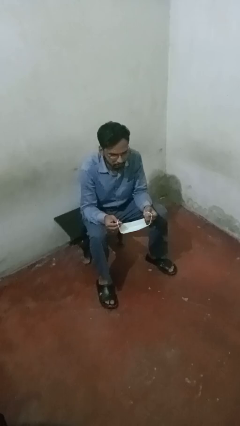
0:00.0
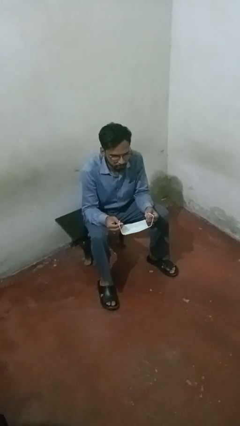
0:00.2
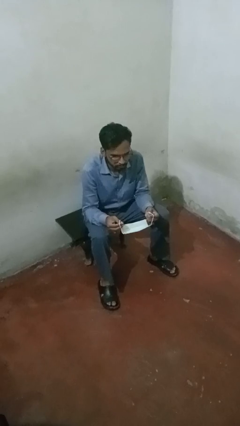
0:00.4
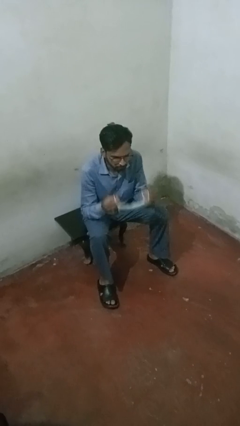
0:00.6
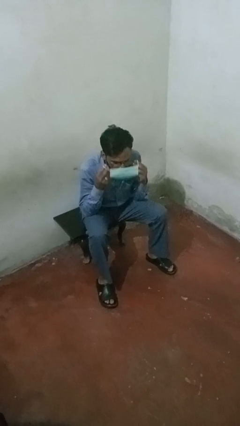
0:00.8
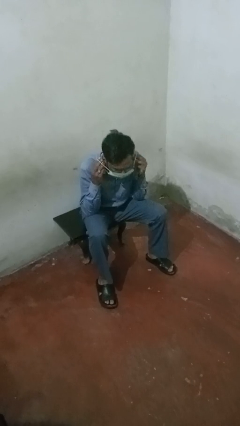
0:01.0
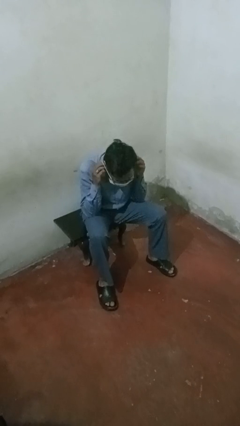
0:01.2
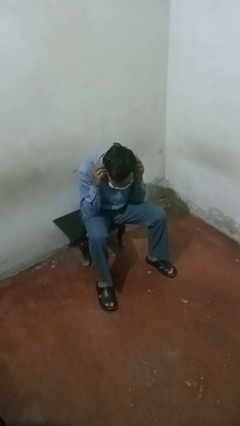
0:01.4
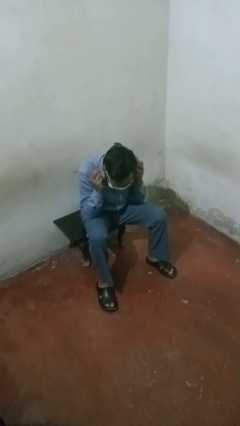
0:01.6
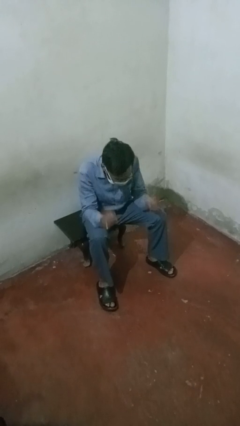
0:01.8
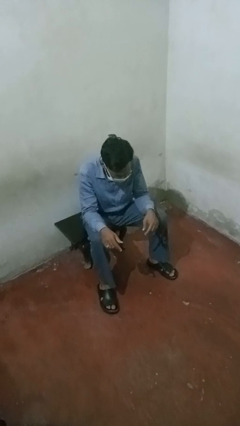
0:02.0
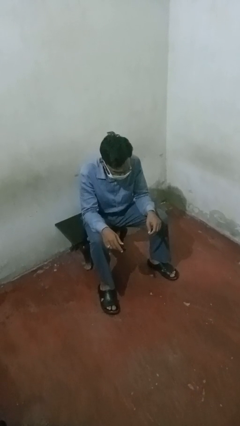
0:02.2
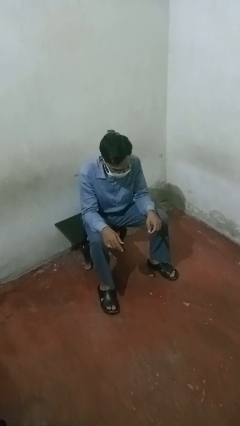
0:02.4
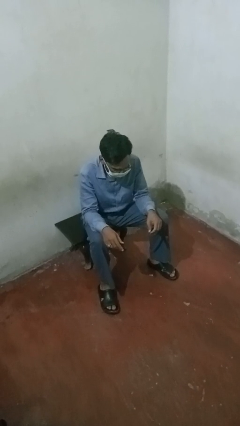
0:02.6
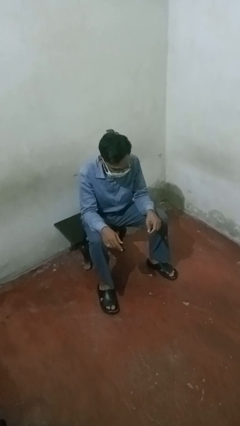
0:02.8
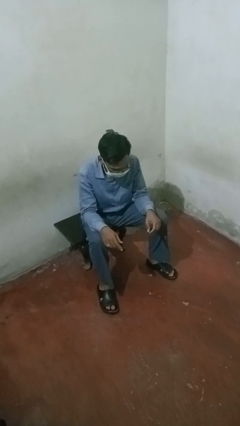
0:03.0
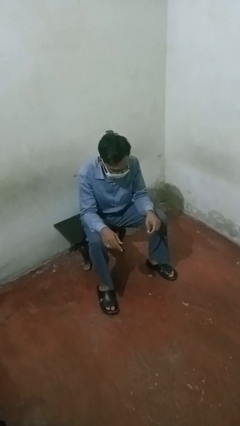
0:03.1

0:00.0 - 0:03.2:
person puts on facemask

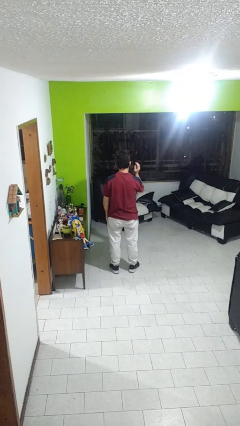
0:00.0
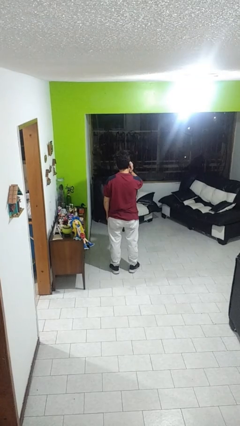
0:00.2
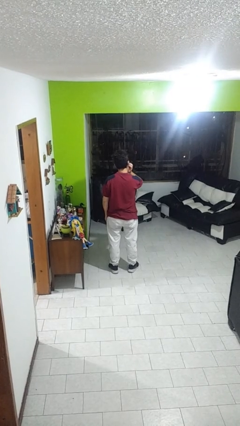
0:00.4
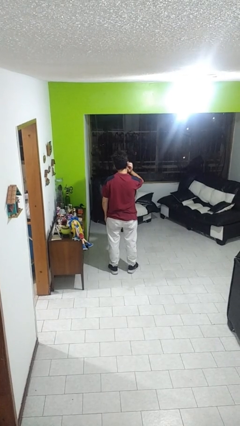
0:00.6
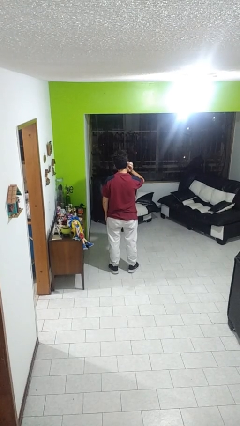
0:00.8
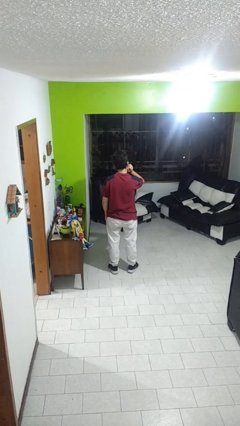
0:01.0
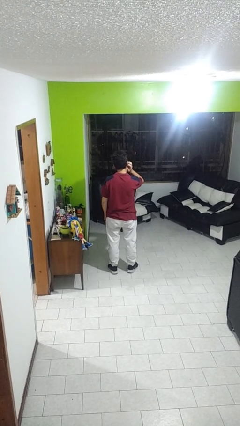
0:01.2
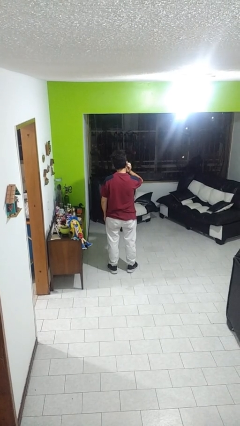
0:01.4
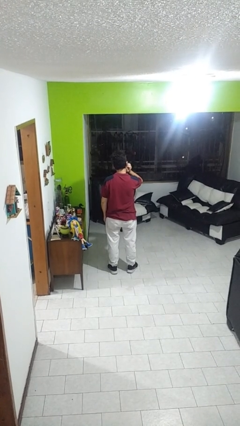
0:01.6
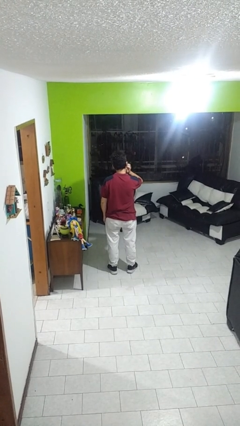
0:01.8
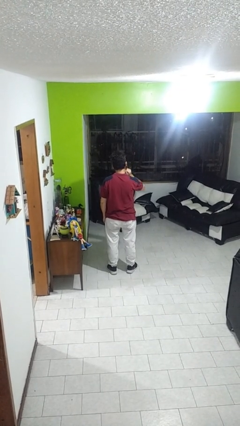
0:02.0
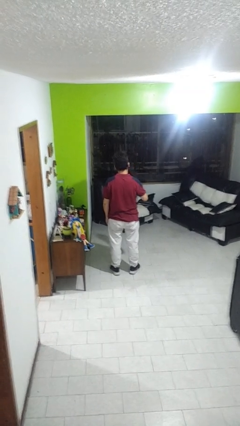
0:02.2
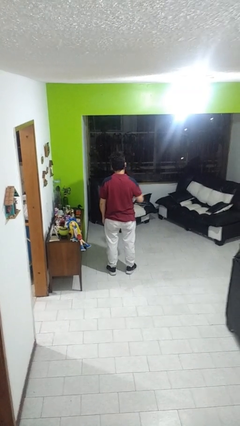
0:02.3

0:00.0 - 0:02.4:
person scratches face

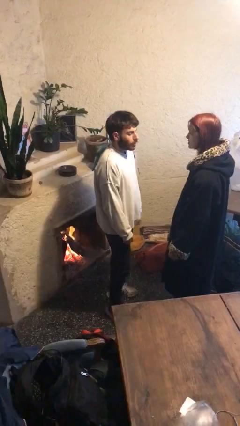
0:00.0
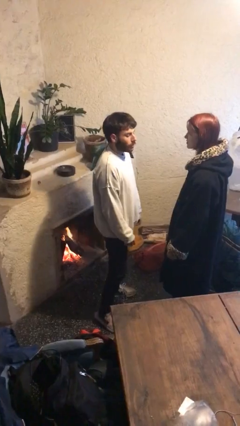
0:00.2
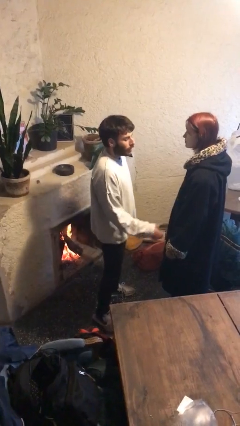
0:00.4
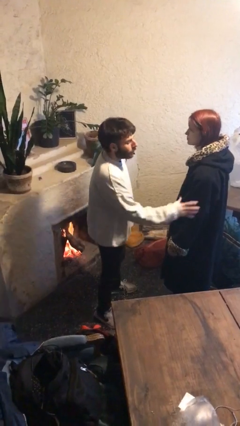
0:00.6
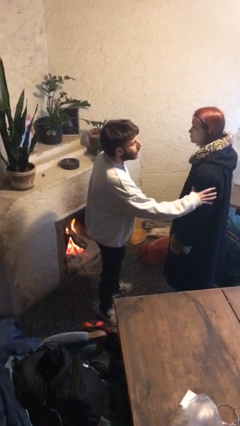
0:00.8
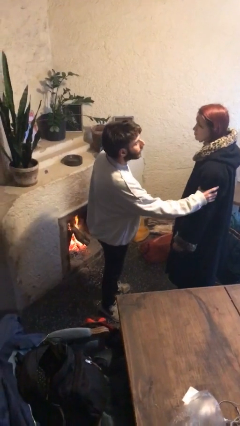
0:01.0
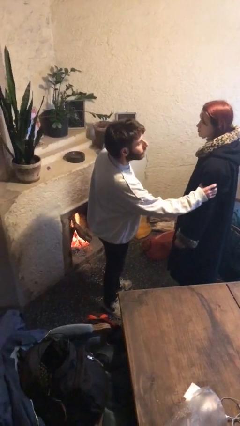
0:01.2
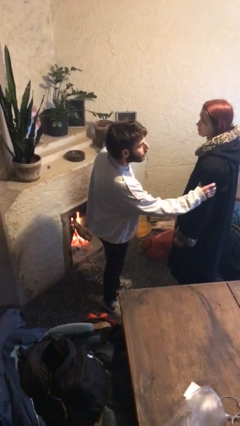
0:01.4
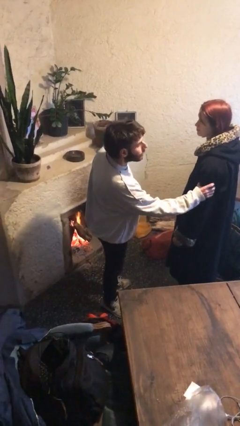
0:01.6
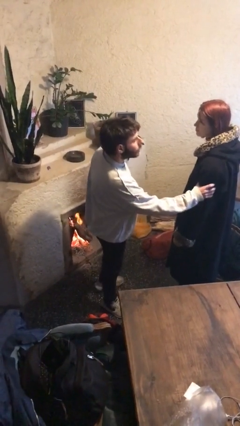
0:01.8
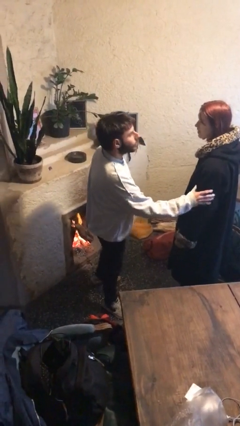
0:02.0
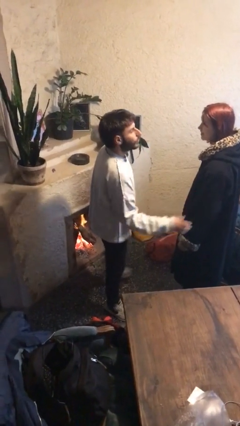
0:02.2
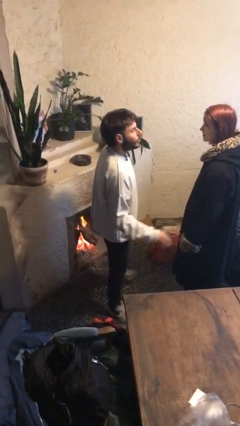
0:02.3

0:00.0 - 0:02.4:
person grabs person by bicep

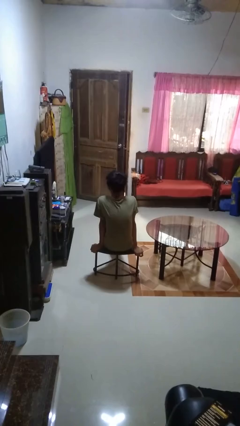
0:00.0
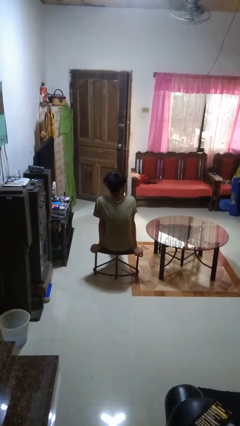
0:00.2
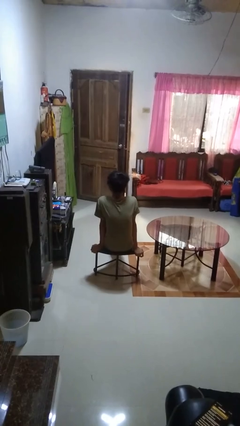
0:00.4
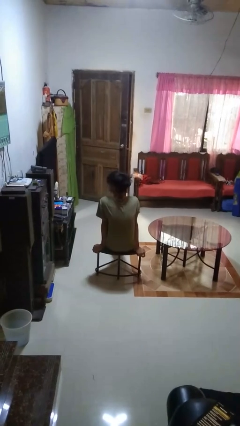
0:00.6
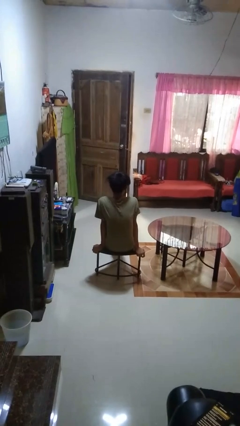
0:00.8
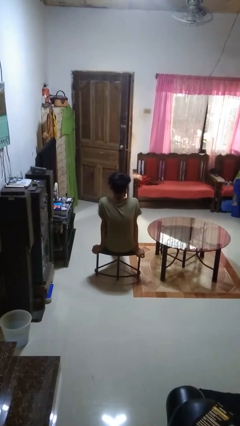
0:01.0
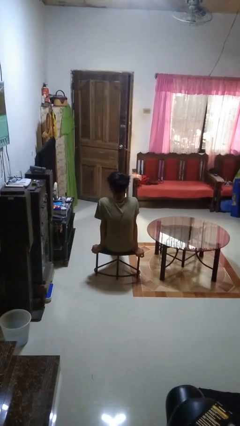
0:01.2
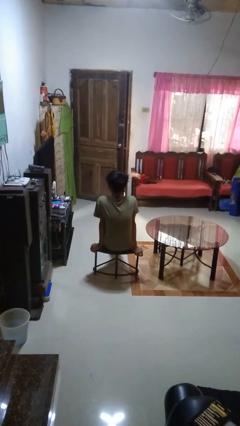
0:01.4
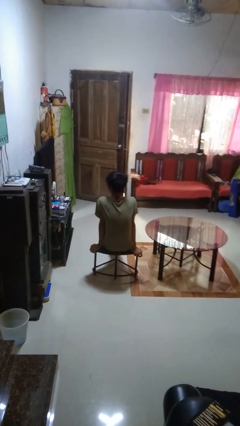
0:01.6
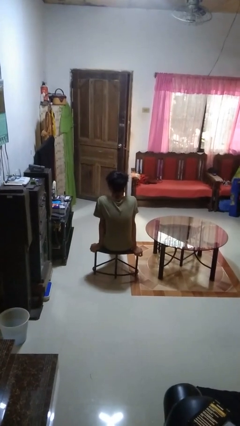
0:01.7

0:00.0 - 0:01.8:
person shakes head

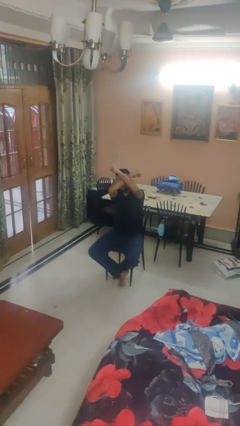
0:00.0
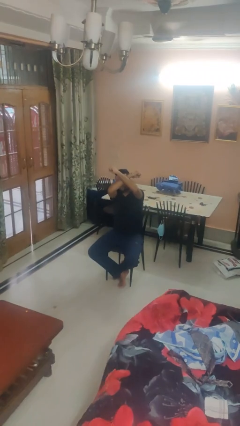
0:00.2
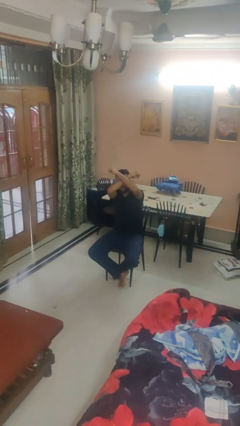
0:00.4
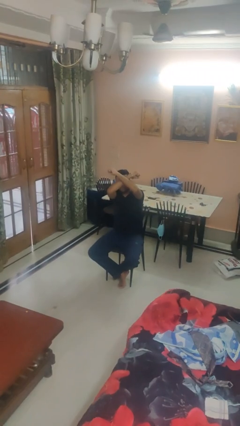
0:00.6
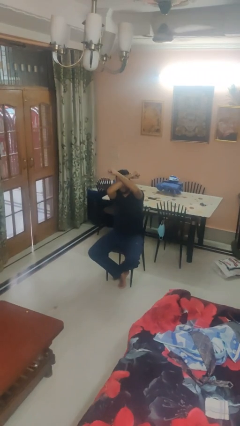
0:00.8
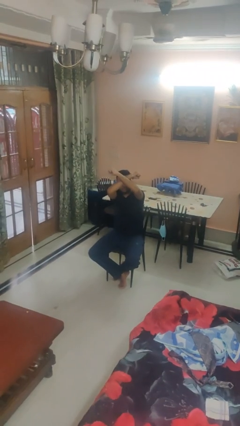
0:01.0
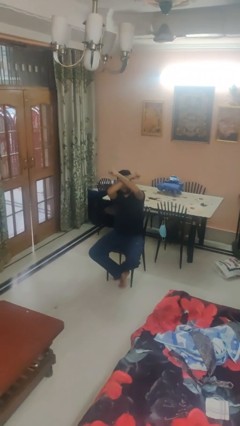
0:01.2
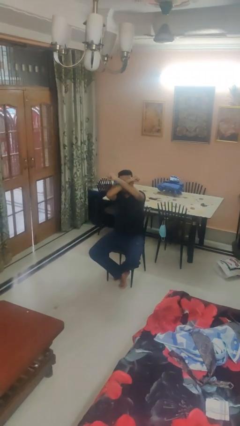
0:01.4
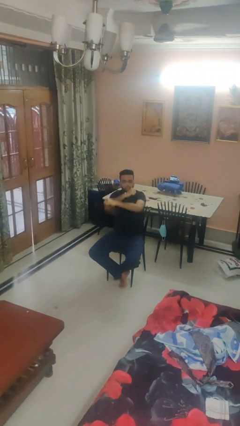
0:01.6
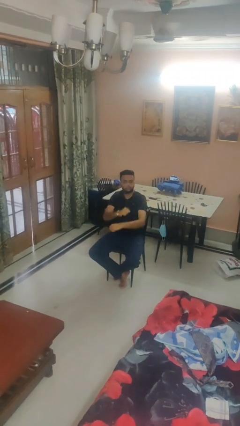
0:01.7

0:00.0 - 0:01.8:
person gestures arms x

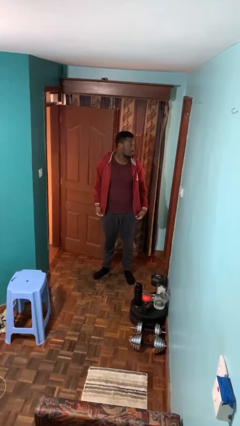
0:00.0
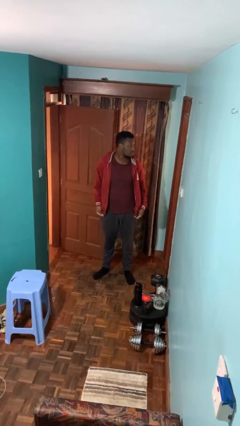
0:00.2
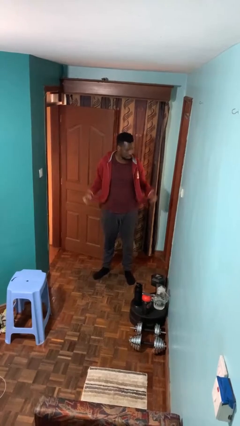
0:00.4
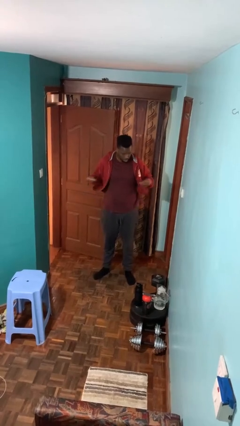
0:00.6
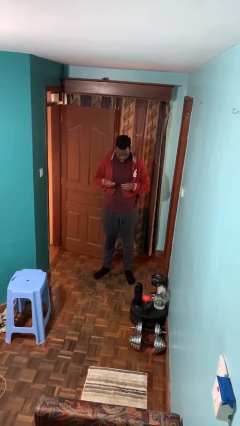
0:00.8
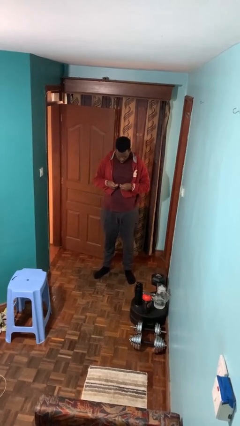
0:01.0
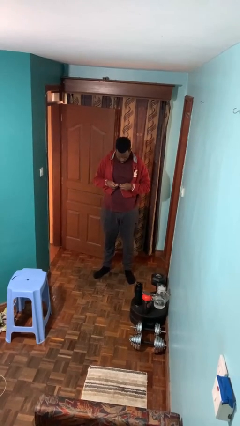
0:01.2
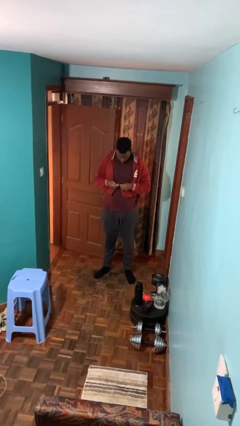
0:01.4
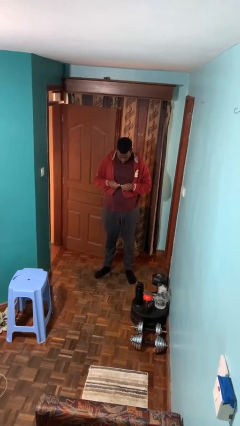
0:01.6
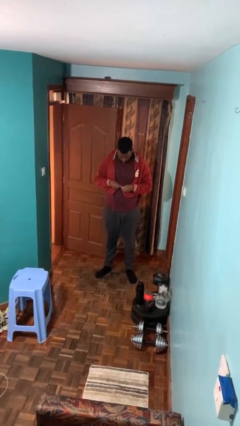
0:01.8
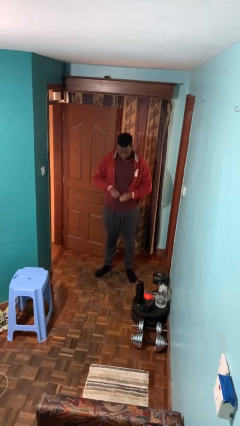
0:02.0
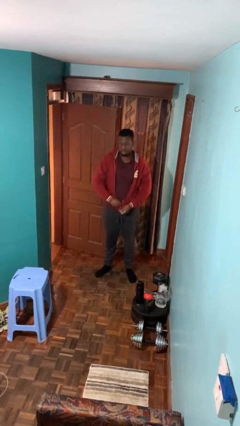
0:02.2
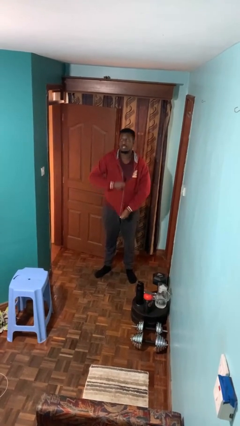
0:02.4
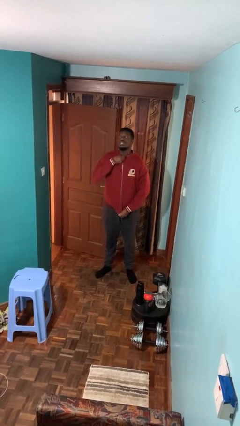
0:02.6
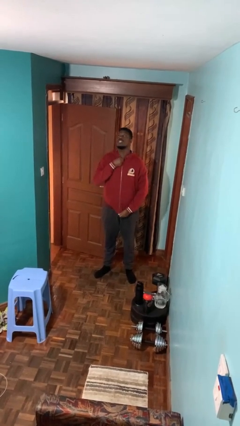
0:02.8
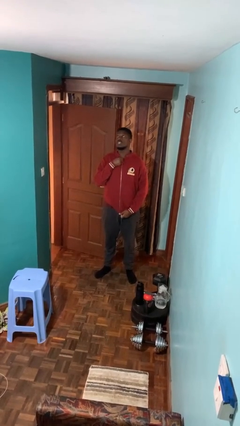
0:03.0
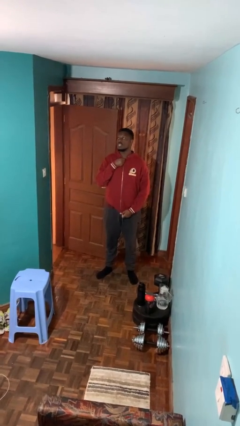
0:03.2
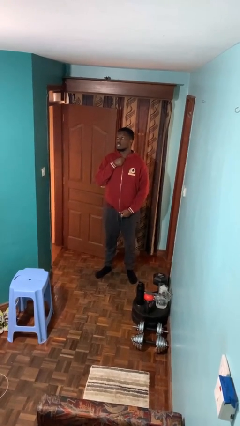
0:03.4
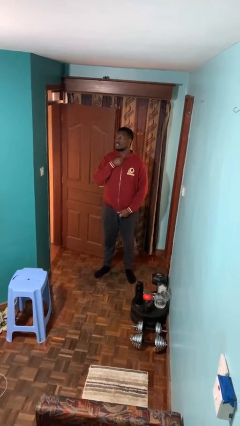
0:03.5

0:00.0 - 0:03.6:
person zips up jacket

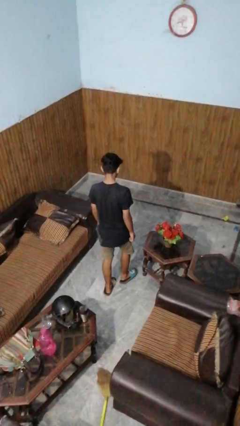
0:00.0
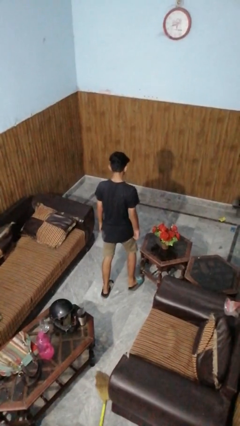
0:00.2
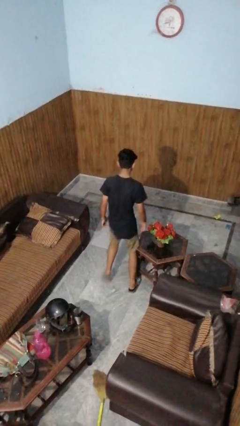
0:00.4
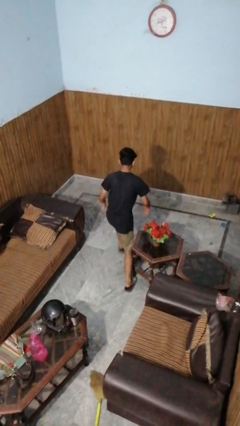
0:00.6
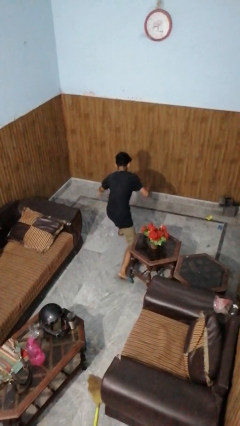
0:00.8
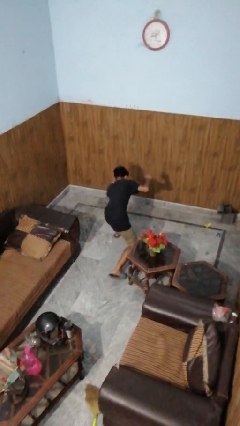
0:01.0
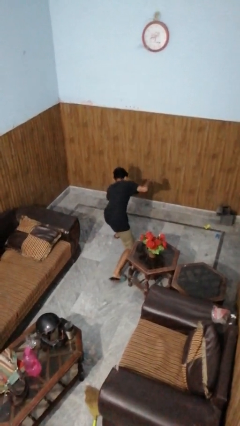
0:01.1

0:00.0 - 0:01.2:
person trips on object on floor

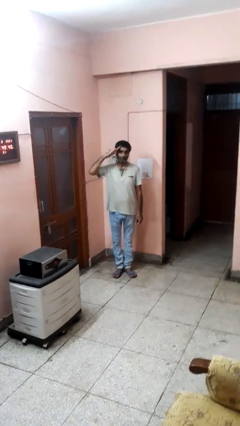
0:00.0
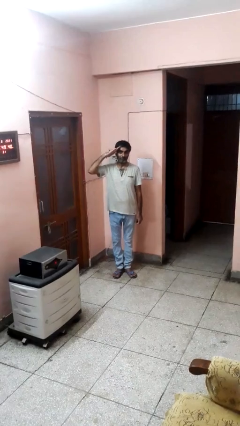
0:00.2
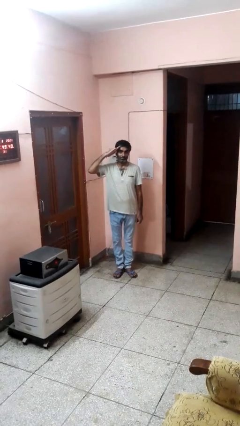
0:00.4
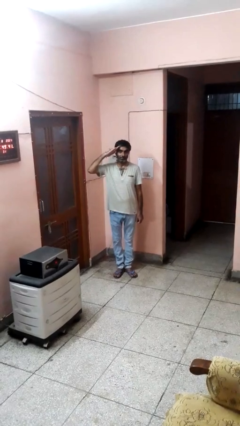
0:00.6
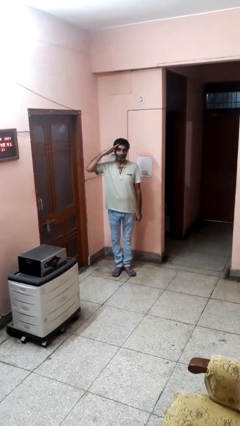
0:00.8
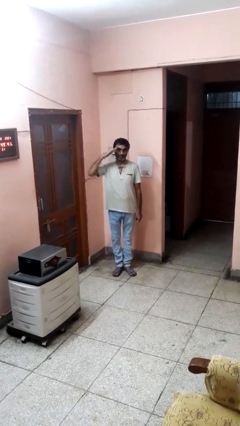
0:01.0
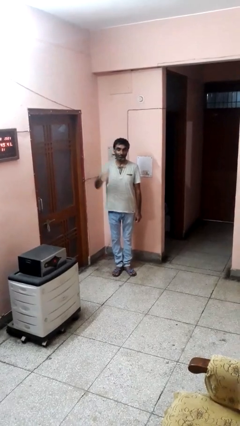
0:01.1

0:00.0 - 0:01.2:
person salutes
